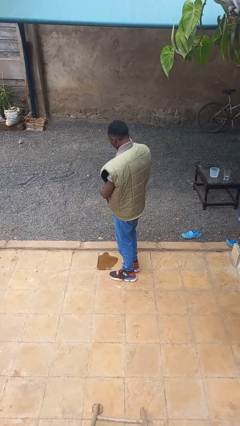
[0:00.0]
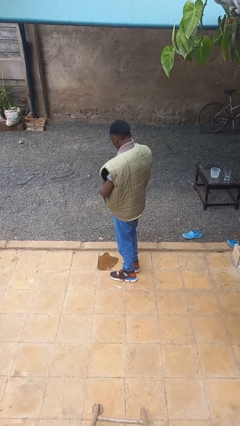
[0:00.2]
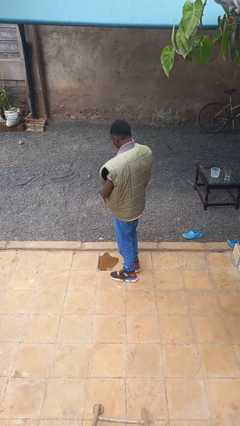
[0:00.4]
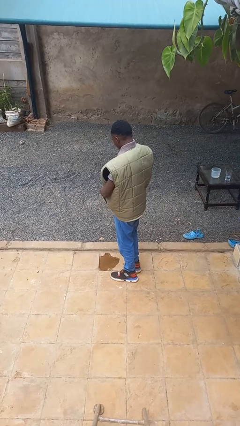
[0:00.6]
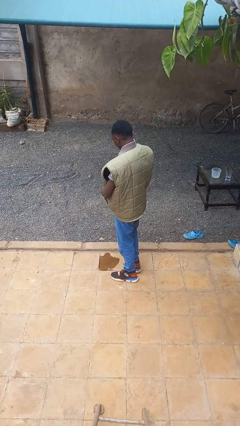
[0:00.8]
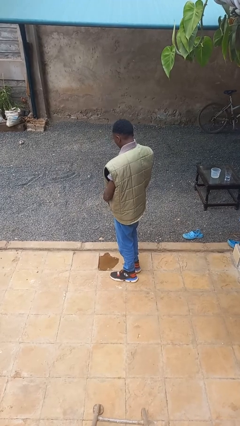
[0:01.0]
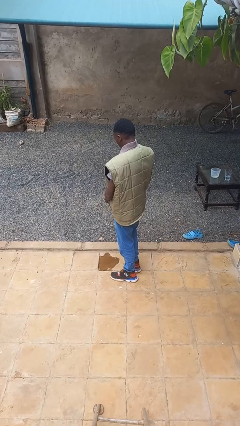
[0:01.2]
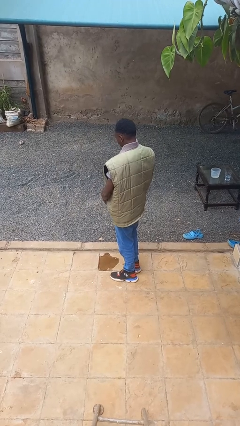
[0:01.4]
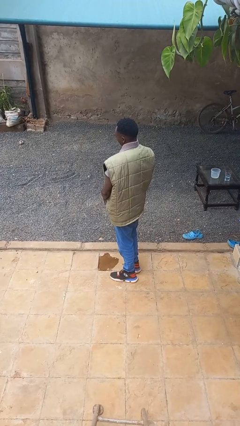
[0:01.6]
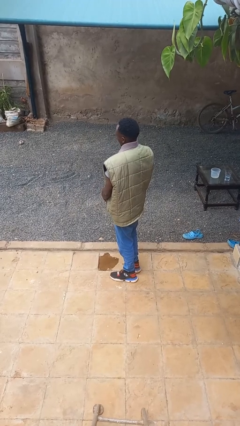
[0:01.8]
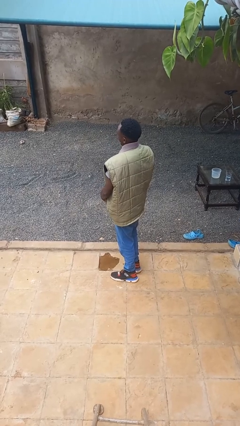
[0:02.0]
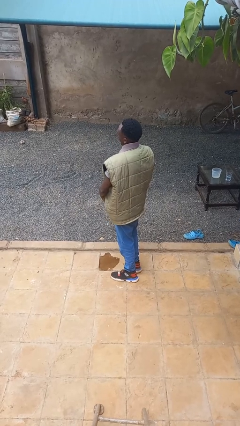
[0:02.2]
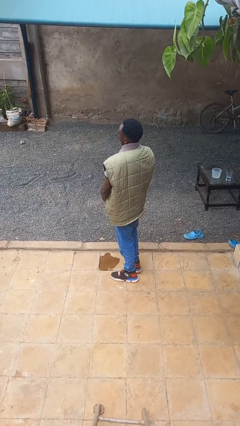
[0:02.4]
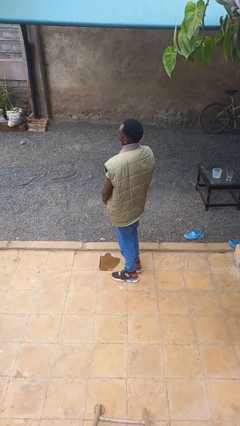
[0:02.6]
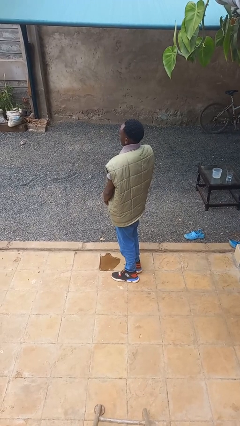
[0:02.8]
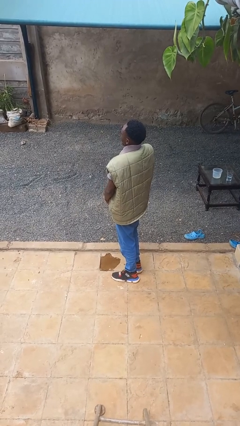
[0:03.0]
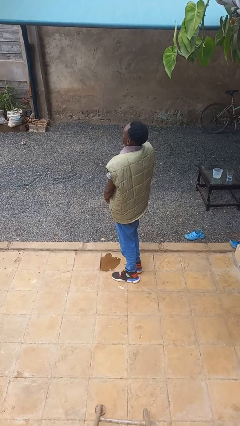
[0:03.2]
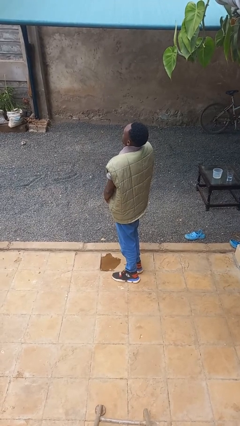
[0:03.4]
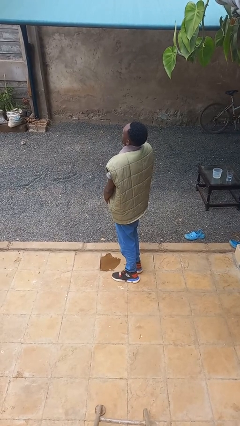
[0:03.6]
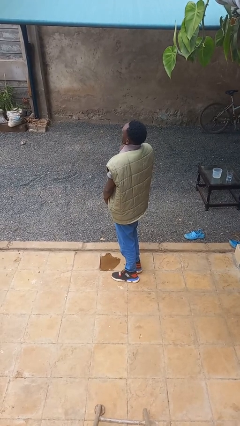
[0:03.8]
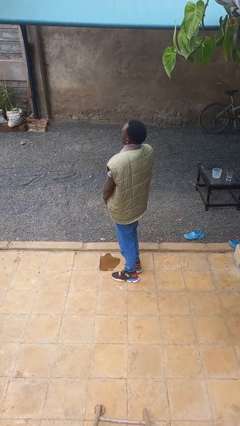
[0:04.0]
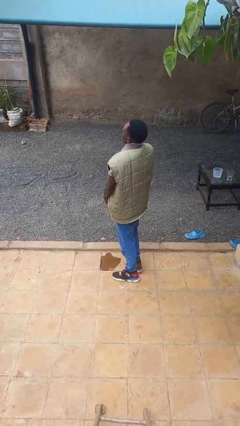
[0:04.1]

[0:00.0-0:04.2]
person zips up jacket

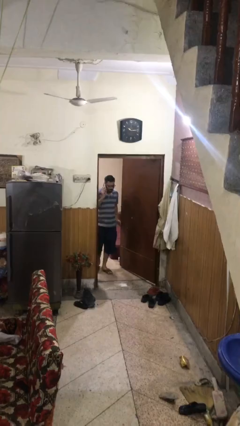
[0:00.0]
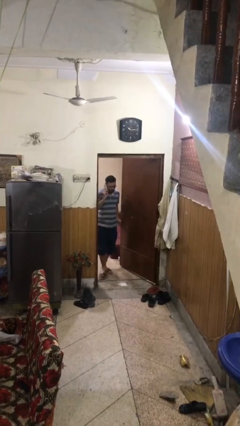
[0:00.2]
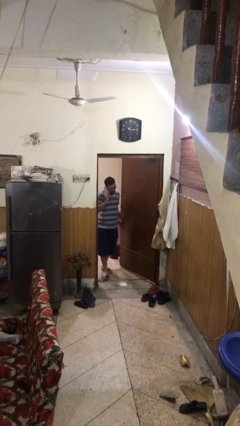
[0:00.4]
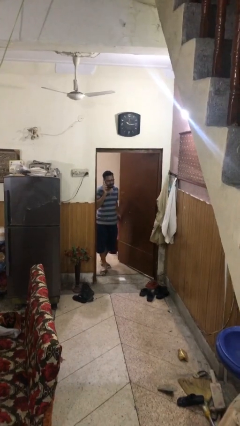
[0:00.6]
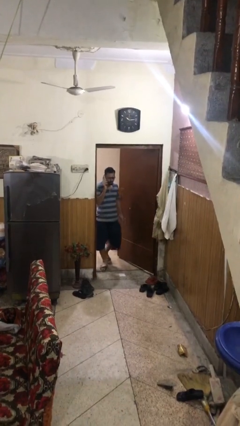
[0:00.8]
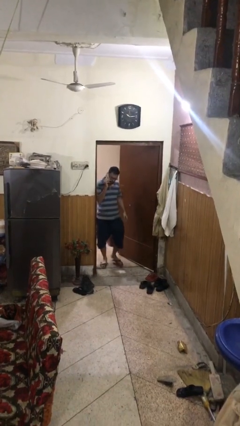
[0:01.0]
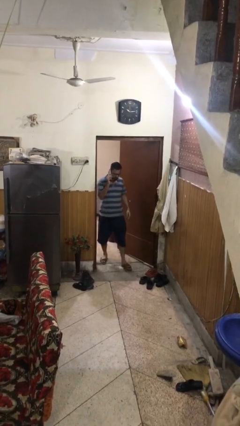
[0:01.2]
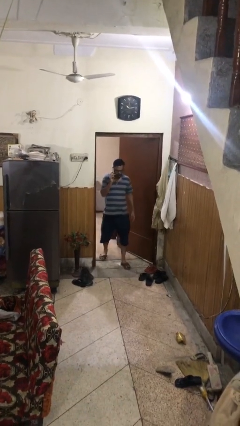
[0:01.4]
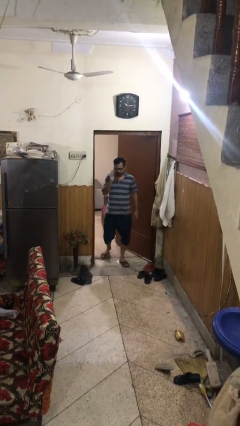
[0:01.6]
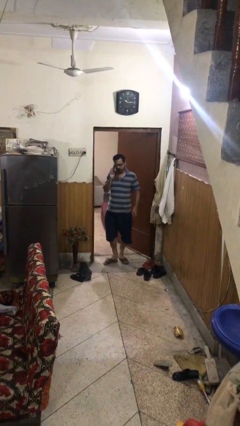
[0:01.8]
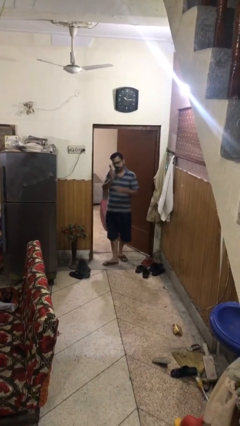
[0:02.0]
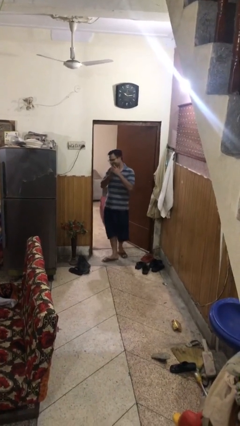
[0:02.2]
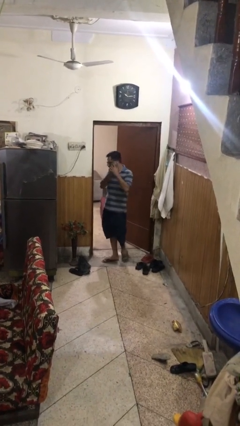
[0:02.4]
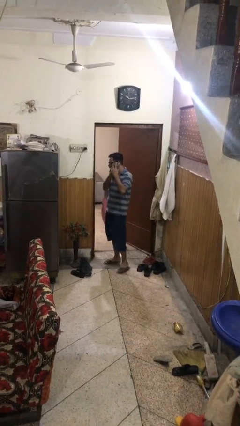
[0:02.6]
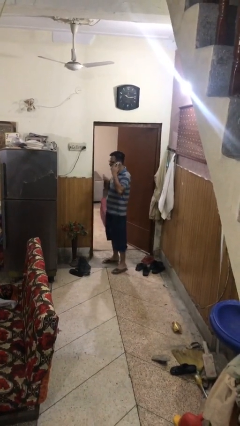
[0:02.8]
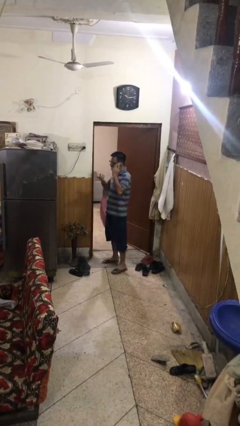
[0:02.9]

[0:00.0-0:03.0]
person enters scene through structure

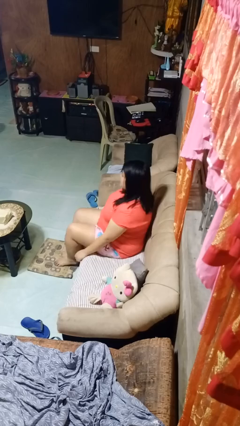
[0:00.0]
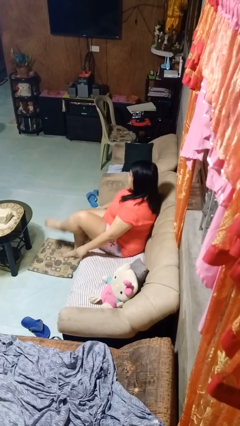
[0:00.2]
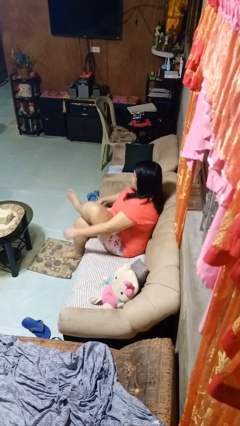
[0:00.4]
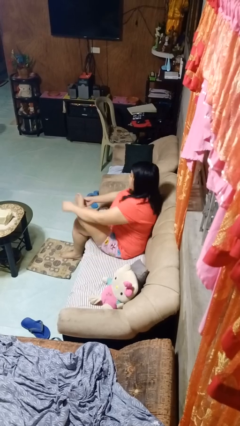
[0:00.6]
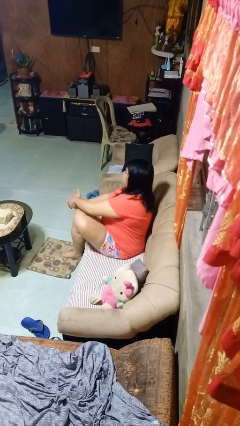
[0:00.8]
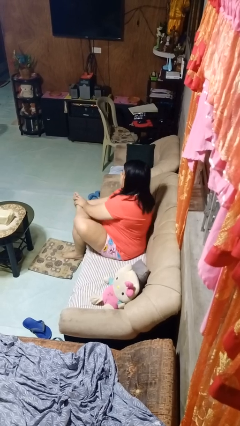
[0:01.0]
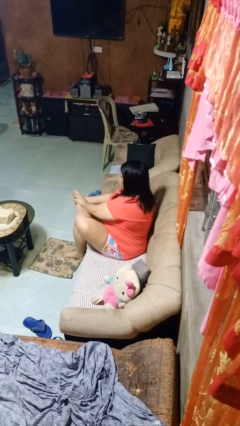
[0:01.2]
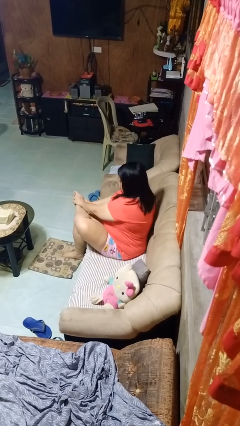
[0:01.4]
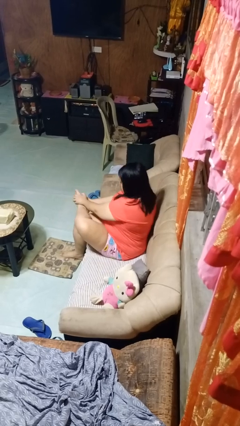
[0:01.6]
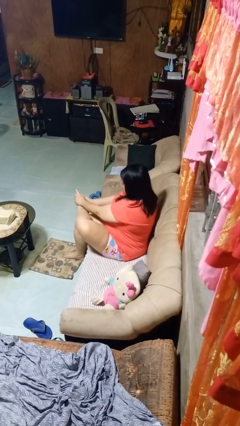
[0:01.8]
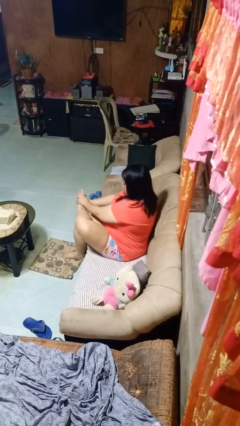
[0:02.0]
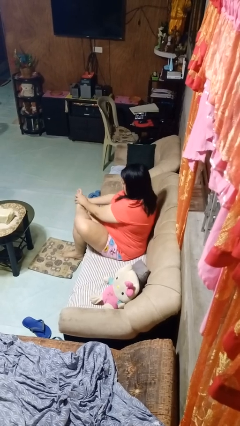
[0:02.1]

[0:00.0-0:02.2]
person rubs foot

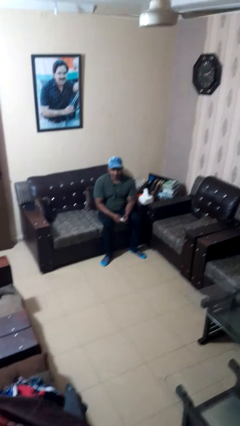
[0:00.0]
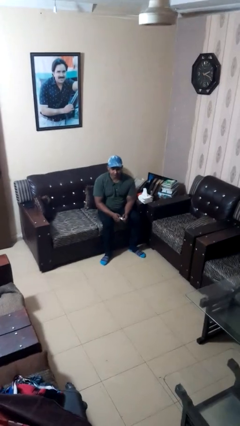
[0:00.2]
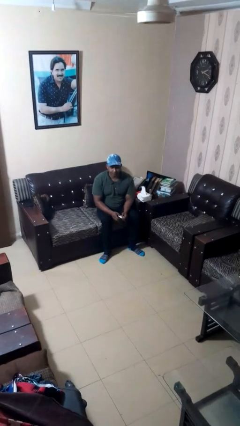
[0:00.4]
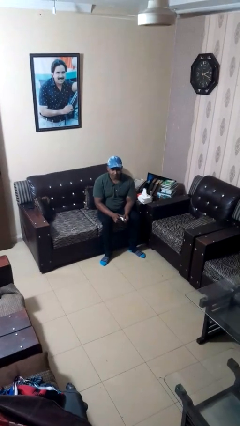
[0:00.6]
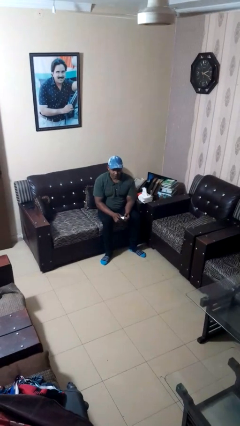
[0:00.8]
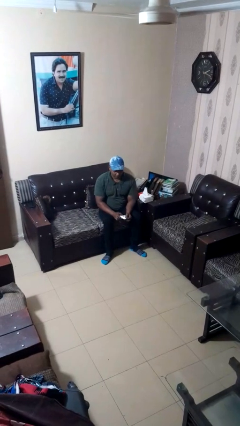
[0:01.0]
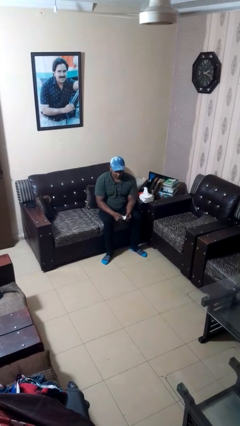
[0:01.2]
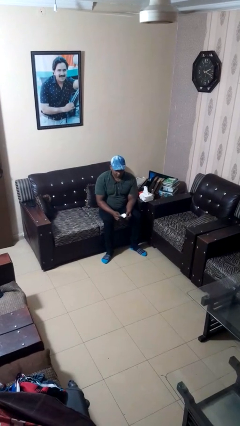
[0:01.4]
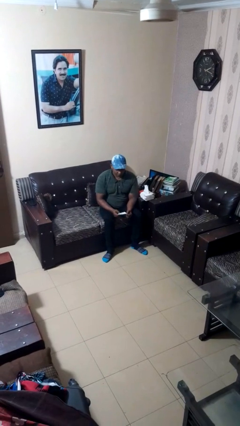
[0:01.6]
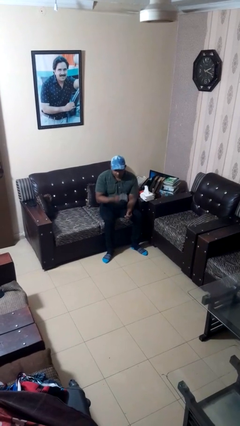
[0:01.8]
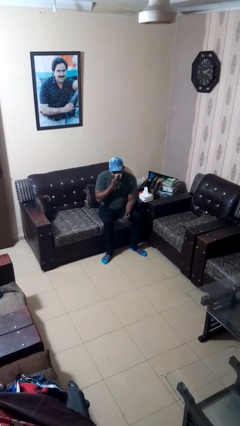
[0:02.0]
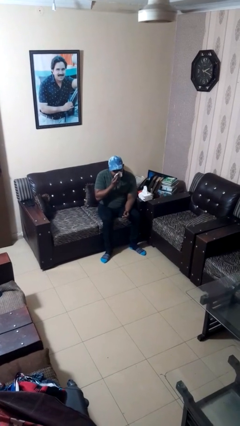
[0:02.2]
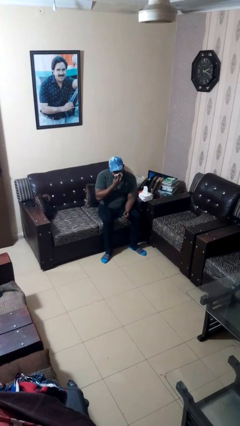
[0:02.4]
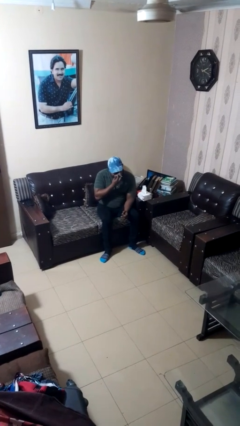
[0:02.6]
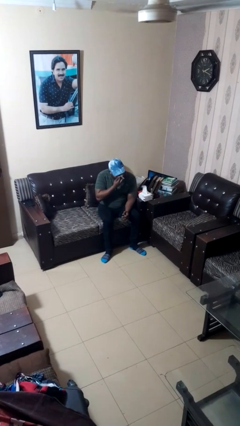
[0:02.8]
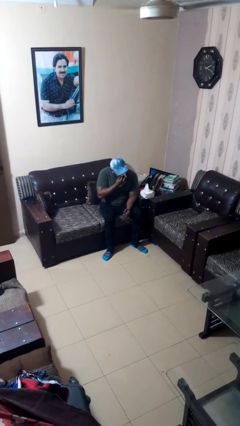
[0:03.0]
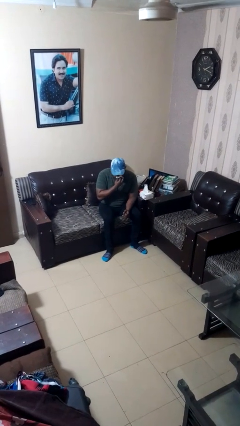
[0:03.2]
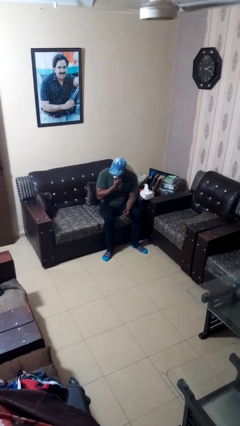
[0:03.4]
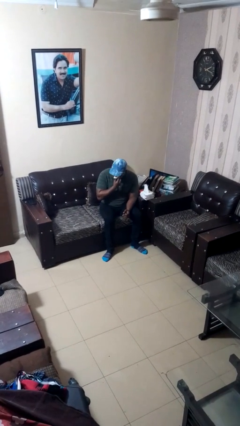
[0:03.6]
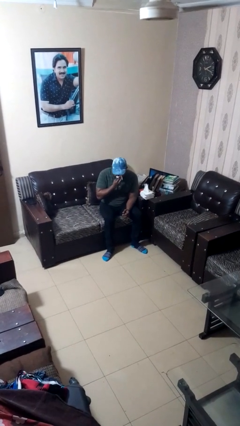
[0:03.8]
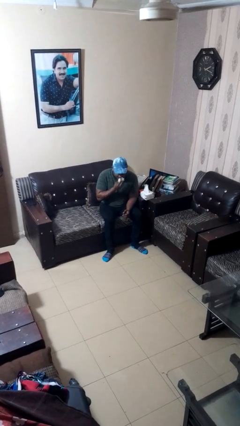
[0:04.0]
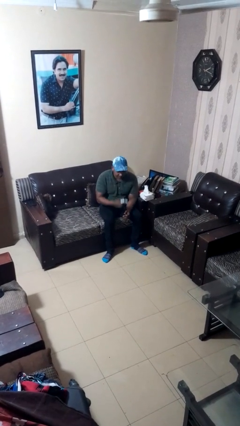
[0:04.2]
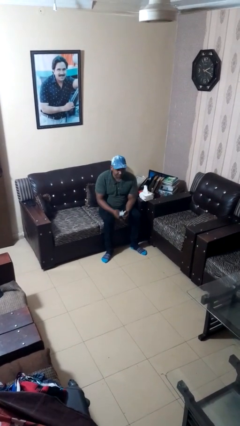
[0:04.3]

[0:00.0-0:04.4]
person blows nose

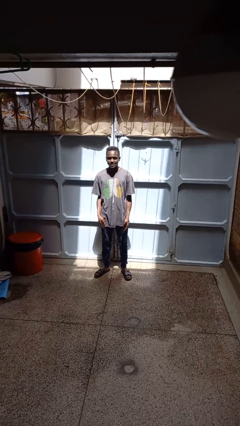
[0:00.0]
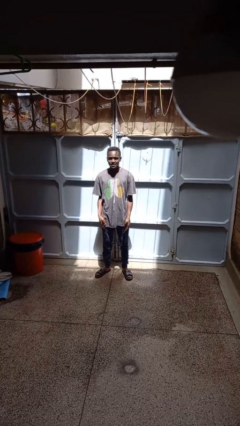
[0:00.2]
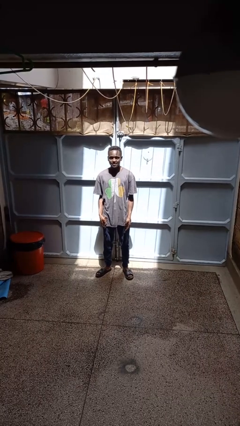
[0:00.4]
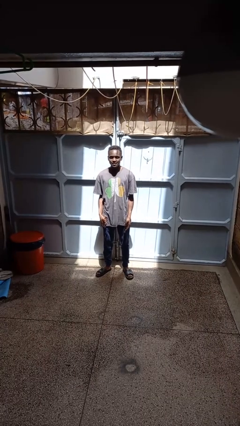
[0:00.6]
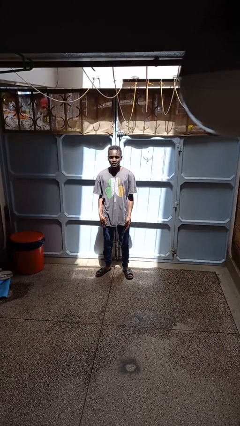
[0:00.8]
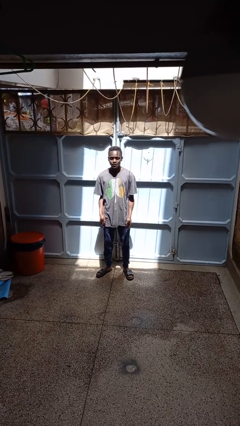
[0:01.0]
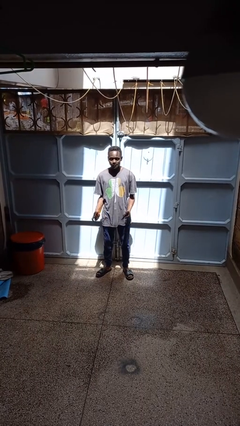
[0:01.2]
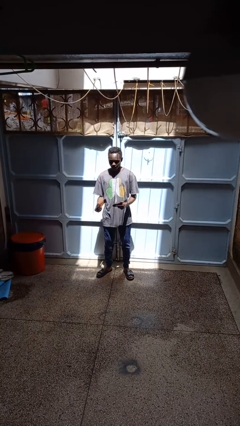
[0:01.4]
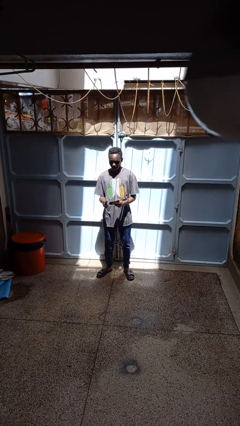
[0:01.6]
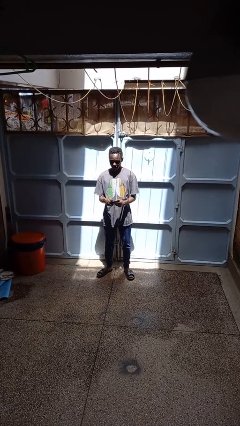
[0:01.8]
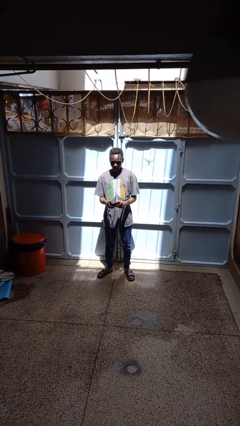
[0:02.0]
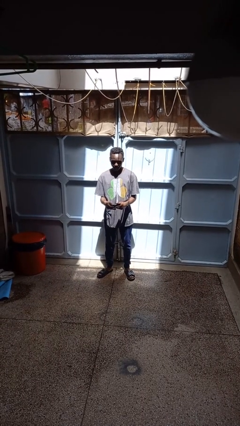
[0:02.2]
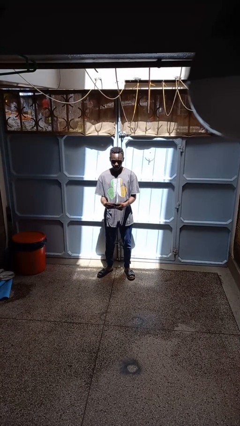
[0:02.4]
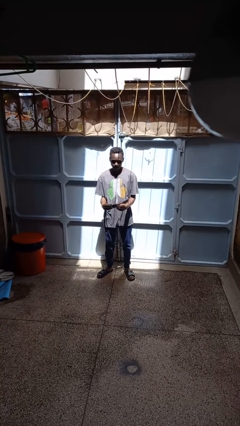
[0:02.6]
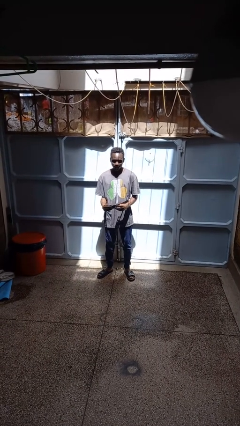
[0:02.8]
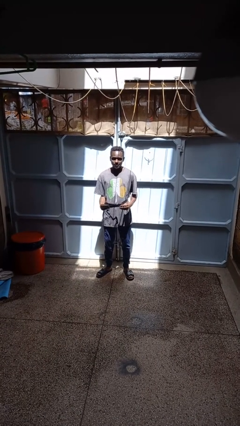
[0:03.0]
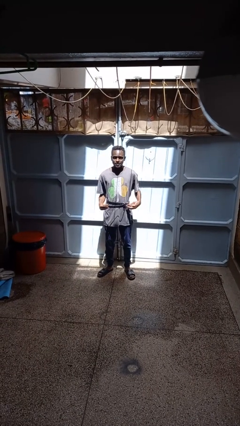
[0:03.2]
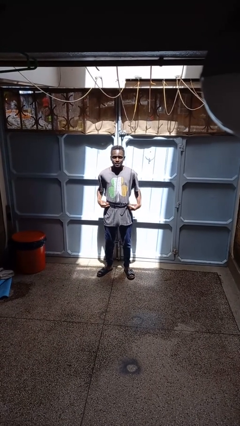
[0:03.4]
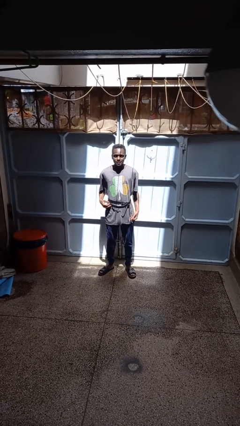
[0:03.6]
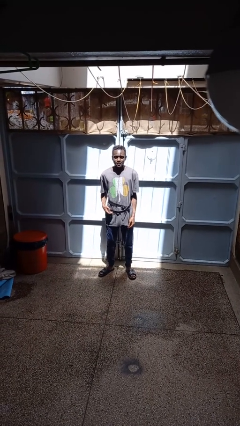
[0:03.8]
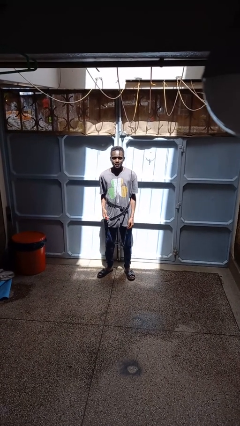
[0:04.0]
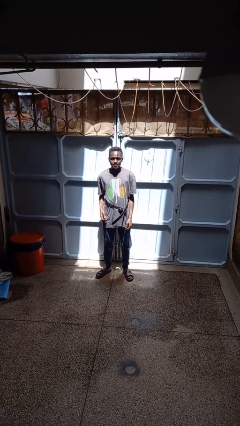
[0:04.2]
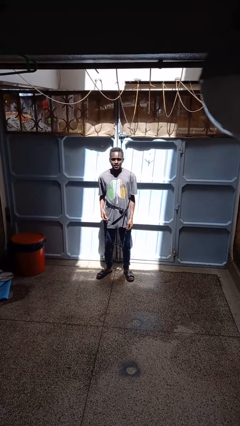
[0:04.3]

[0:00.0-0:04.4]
person puts on belt
